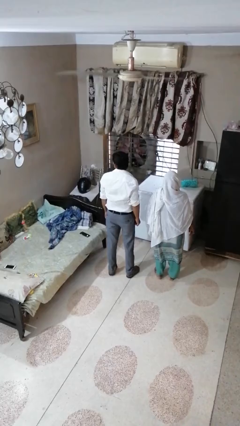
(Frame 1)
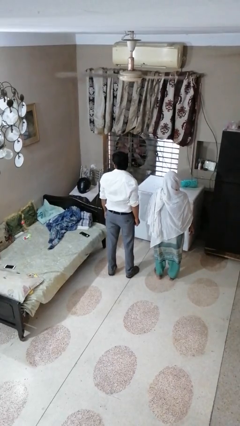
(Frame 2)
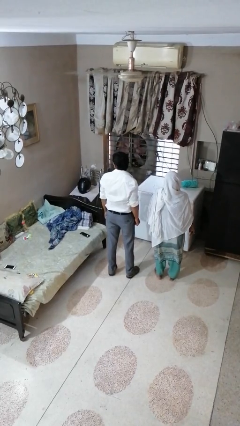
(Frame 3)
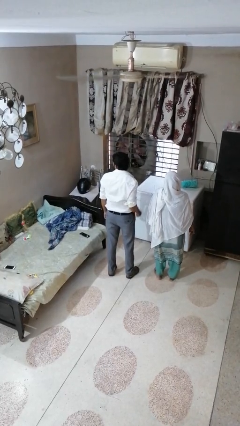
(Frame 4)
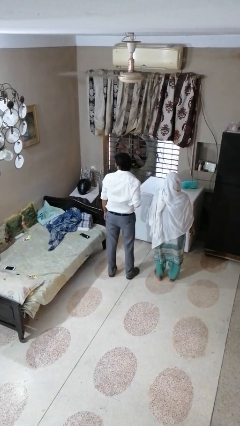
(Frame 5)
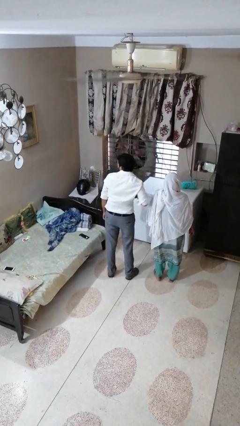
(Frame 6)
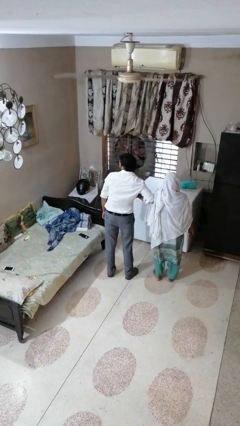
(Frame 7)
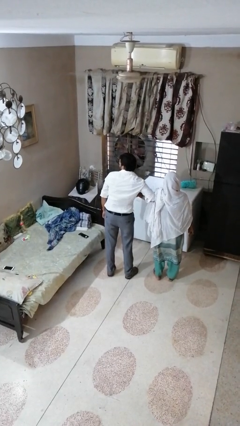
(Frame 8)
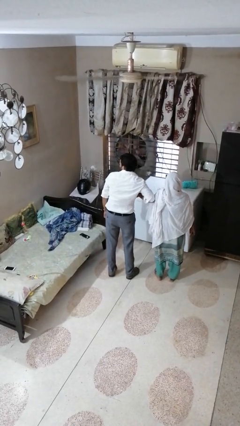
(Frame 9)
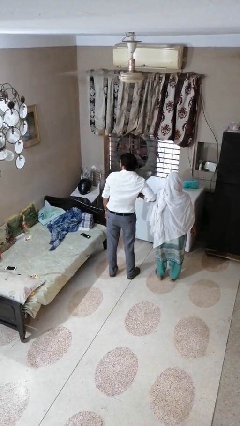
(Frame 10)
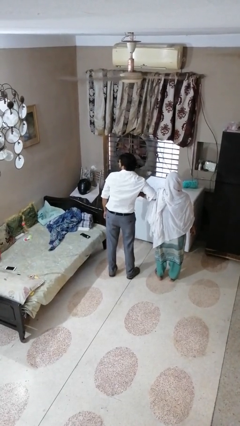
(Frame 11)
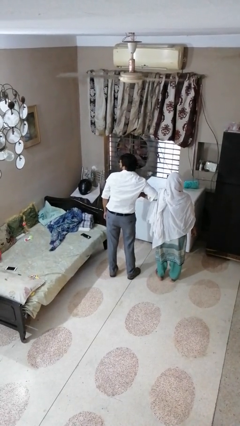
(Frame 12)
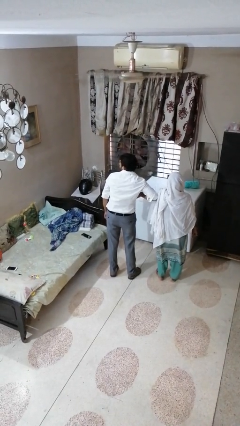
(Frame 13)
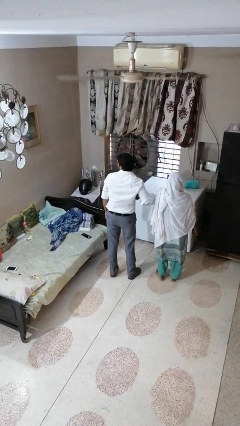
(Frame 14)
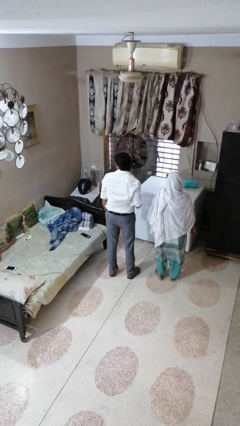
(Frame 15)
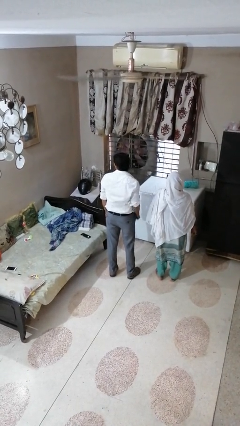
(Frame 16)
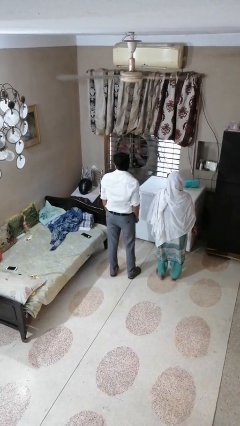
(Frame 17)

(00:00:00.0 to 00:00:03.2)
person nudges person with elbow

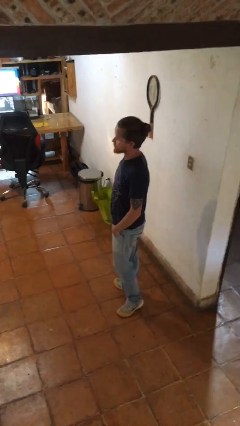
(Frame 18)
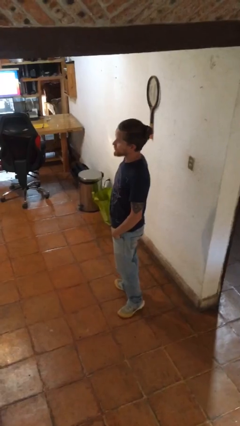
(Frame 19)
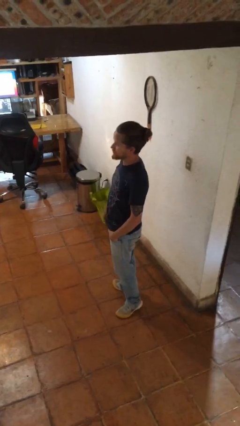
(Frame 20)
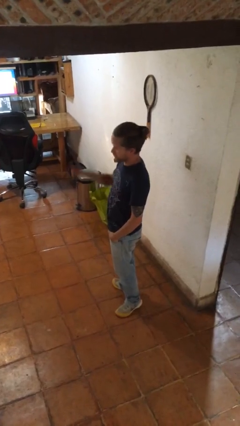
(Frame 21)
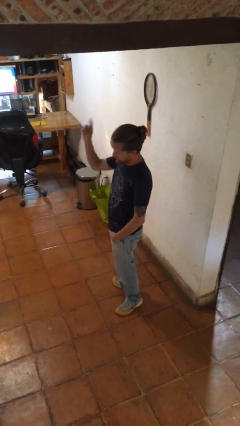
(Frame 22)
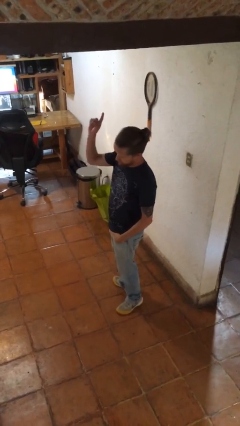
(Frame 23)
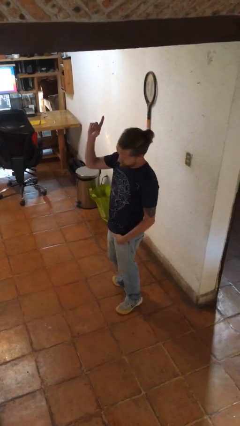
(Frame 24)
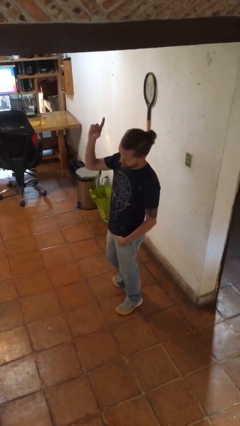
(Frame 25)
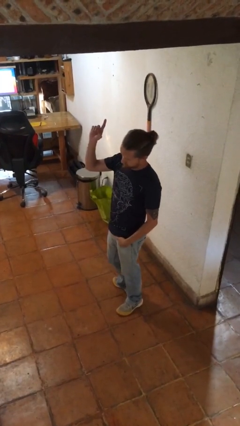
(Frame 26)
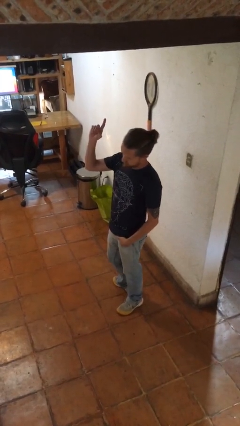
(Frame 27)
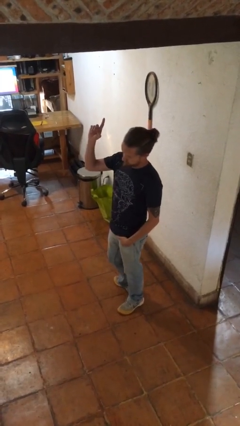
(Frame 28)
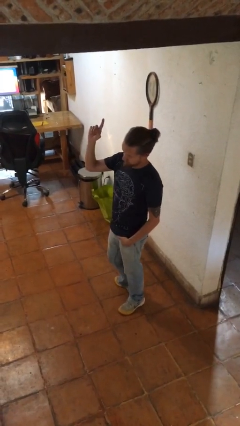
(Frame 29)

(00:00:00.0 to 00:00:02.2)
person gestures raise hand

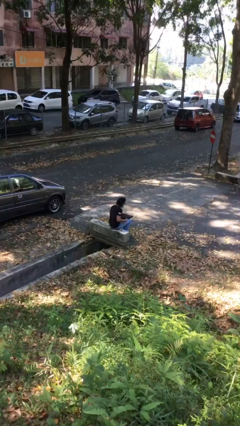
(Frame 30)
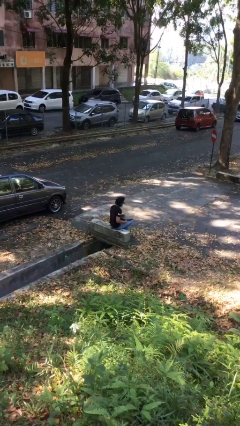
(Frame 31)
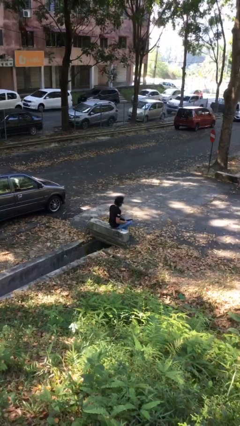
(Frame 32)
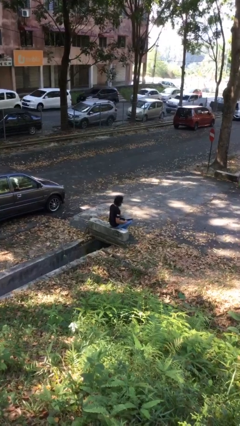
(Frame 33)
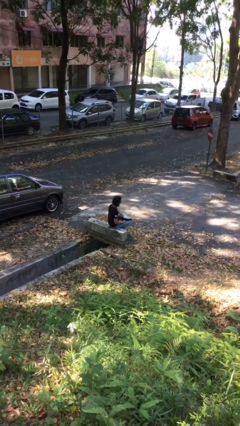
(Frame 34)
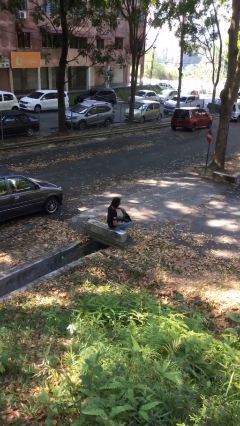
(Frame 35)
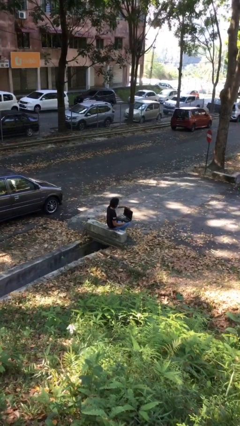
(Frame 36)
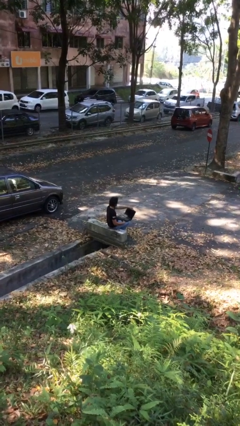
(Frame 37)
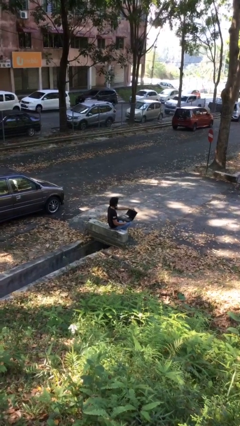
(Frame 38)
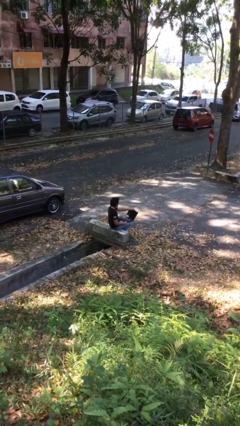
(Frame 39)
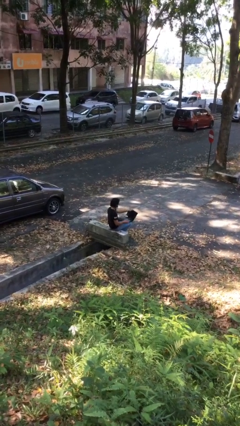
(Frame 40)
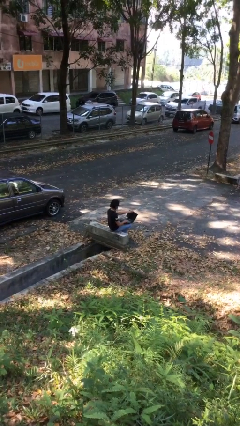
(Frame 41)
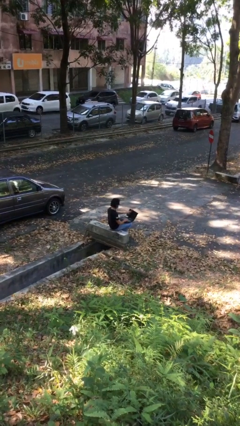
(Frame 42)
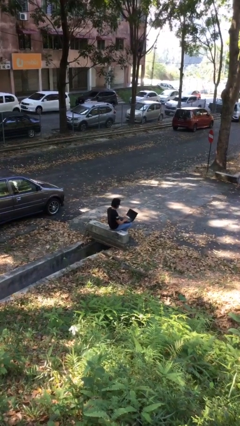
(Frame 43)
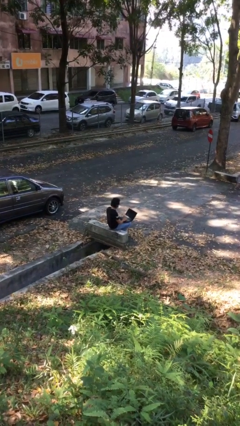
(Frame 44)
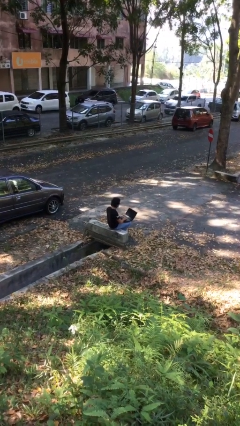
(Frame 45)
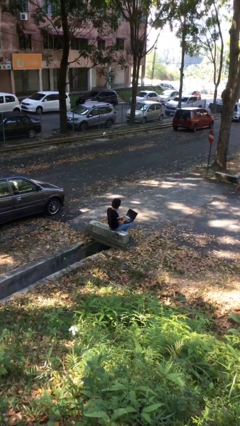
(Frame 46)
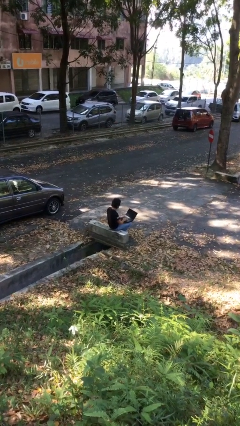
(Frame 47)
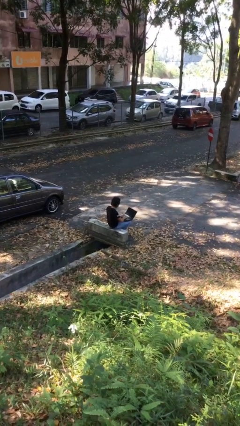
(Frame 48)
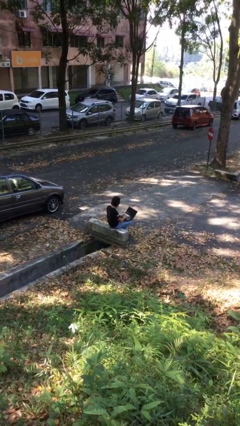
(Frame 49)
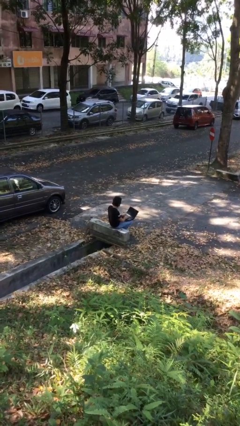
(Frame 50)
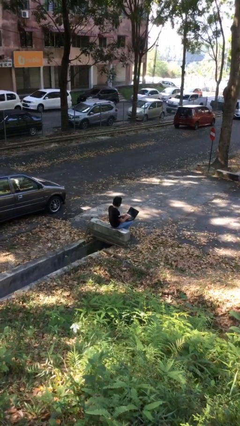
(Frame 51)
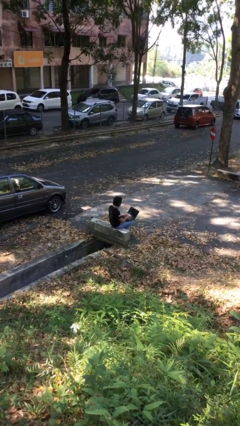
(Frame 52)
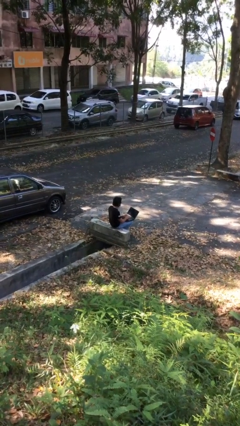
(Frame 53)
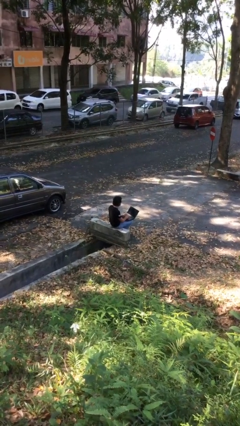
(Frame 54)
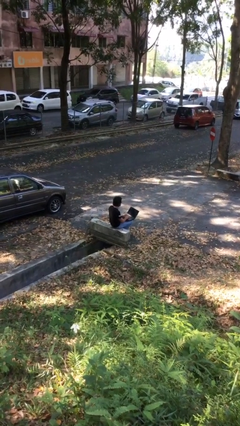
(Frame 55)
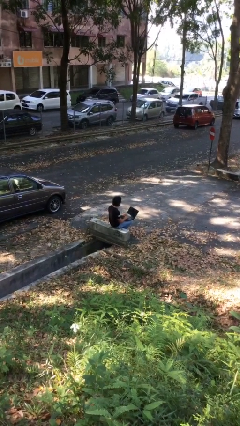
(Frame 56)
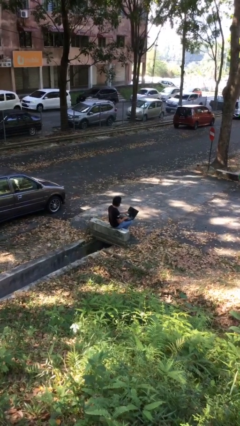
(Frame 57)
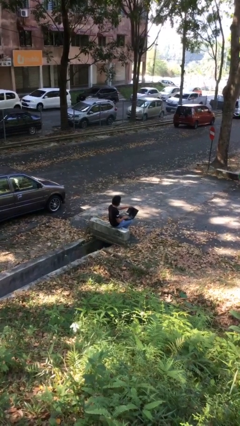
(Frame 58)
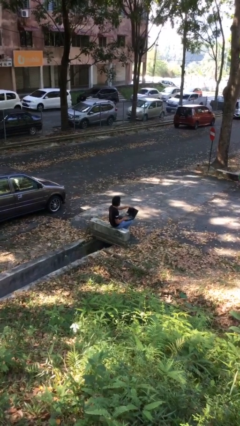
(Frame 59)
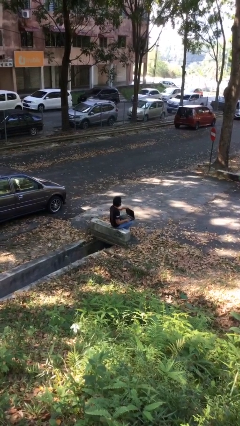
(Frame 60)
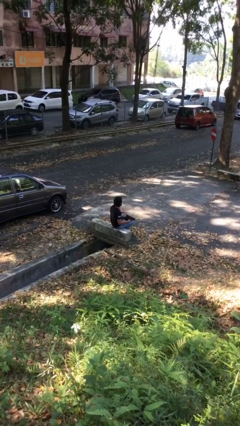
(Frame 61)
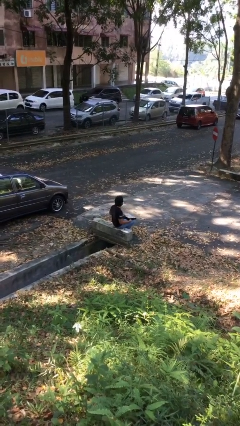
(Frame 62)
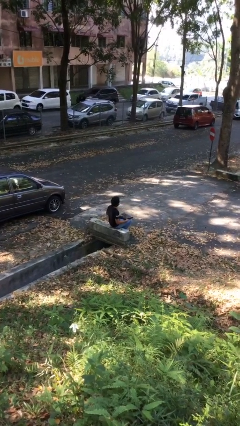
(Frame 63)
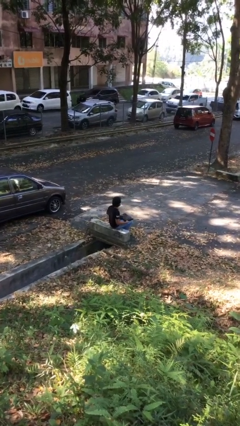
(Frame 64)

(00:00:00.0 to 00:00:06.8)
person interacts with laptop

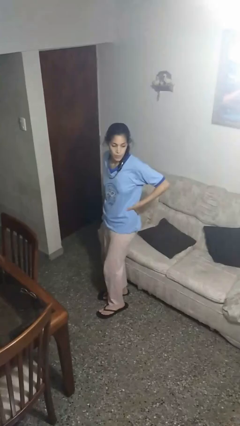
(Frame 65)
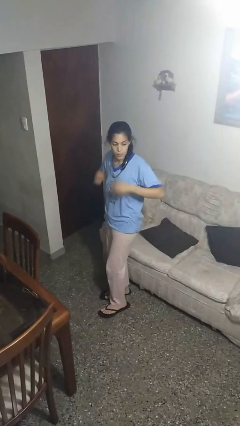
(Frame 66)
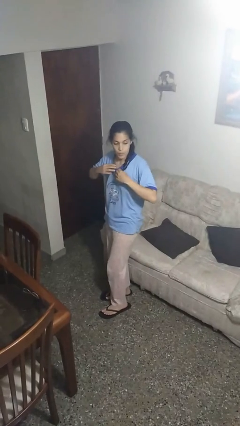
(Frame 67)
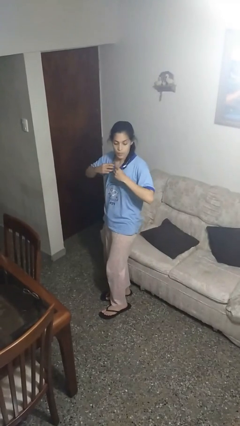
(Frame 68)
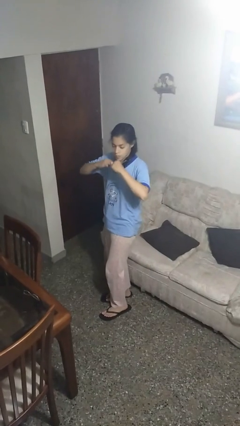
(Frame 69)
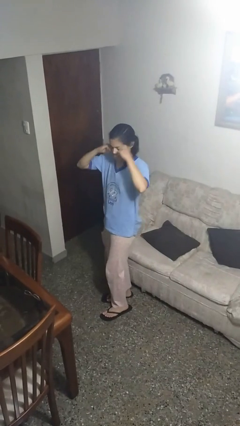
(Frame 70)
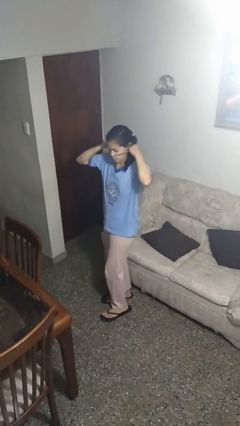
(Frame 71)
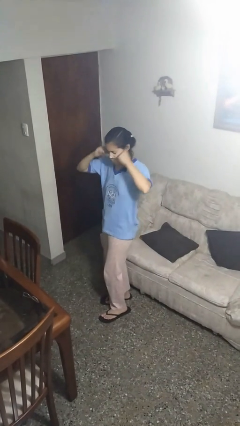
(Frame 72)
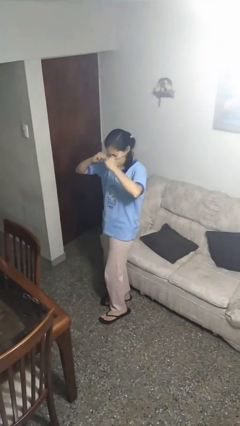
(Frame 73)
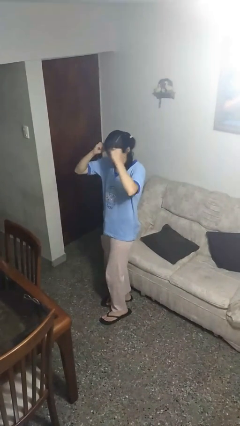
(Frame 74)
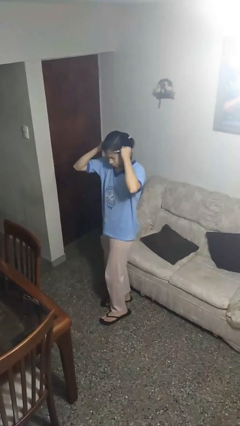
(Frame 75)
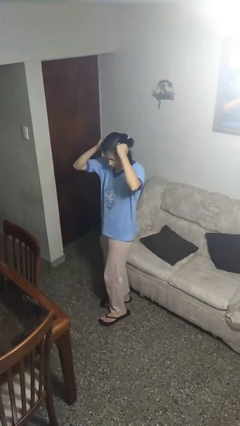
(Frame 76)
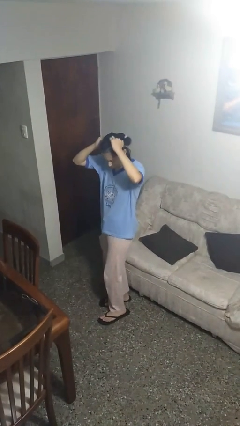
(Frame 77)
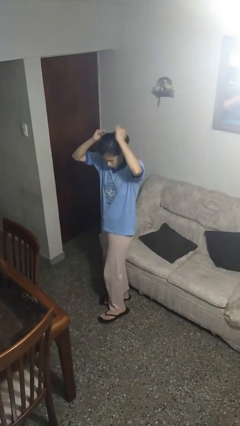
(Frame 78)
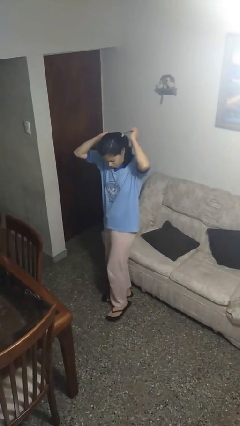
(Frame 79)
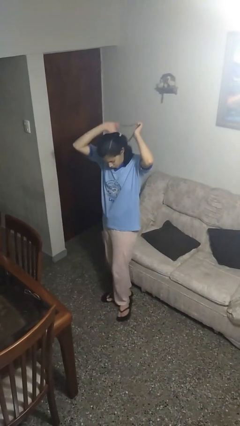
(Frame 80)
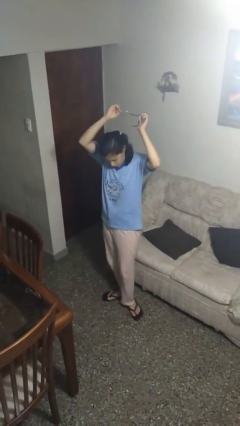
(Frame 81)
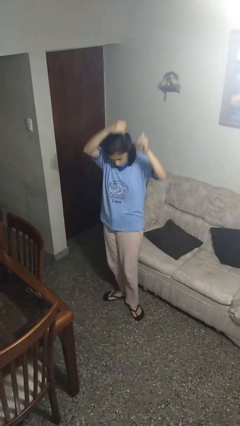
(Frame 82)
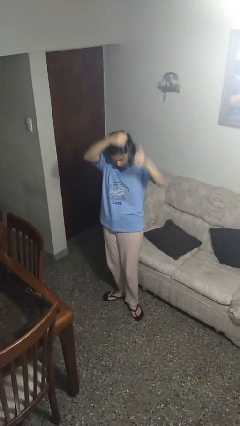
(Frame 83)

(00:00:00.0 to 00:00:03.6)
person takes off necklace

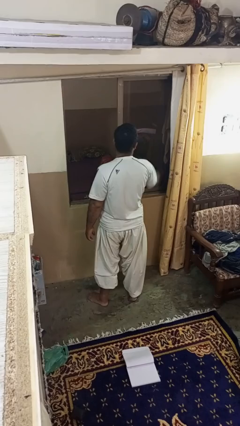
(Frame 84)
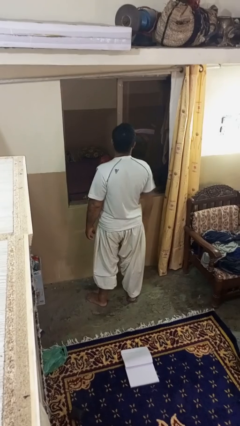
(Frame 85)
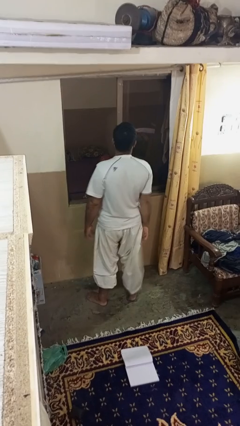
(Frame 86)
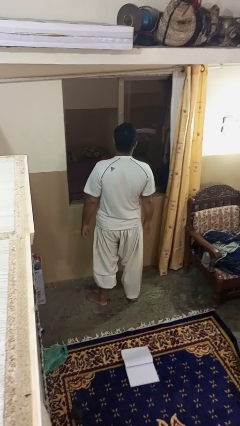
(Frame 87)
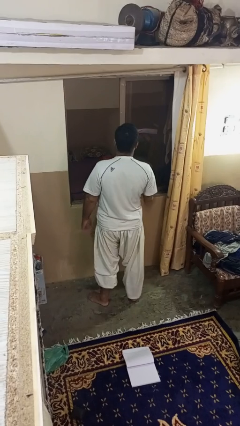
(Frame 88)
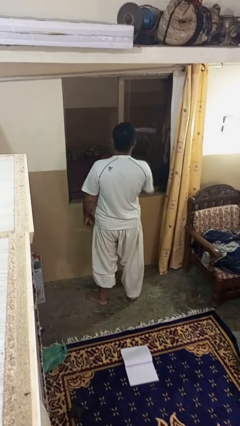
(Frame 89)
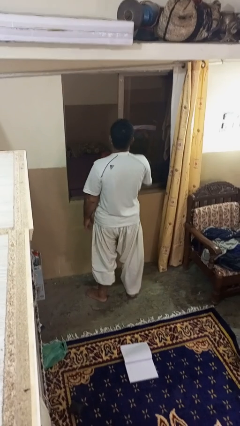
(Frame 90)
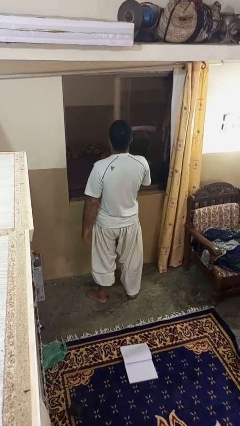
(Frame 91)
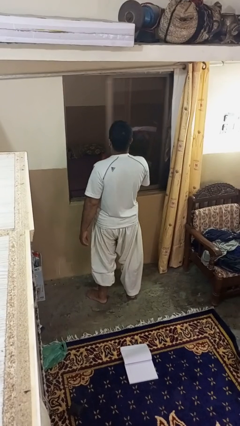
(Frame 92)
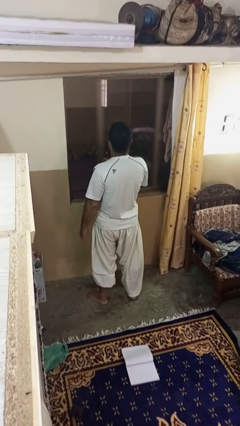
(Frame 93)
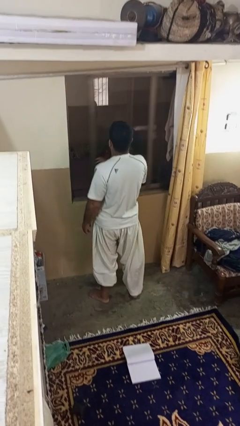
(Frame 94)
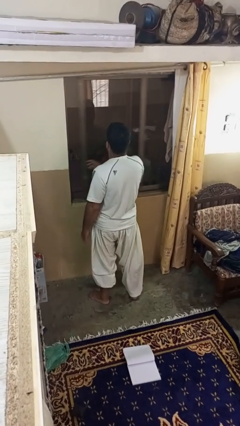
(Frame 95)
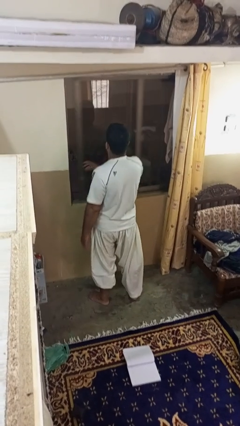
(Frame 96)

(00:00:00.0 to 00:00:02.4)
person closes home window
